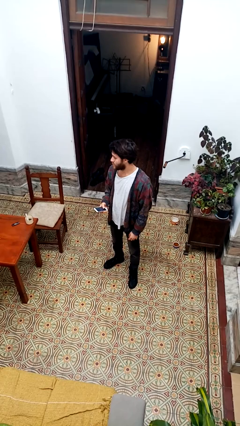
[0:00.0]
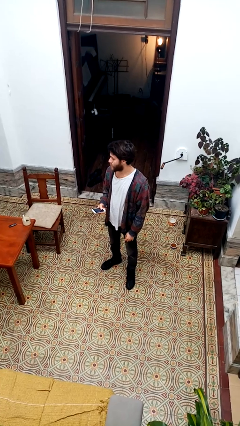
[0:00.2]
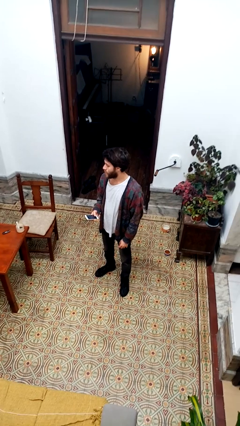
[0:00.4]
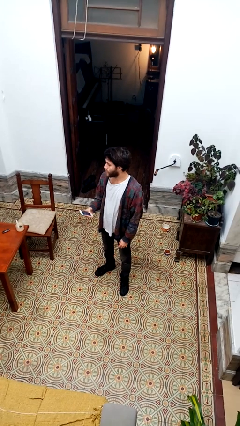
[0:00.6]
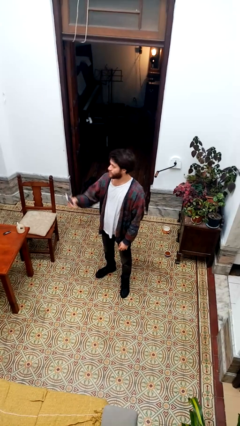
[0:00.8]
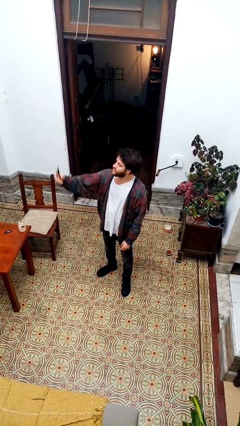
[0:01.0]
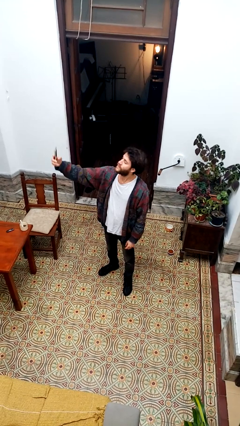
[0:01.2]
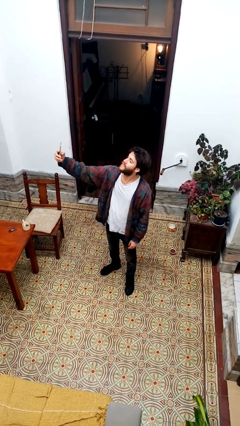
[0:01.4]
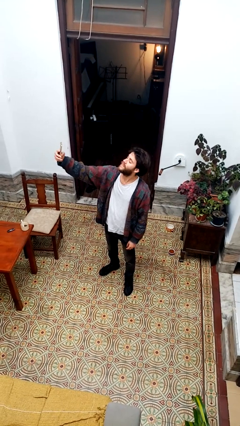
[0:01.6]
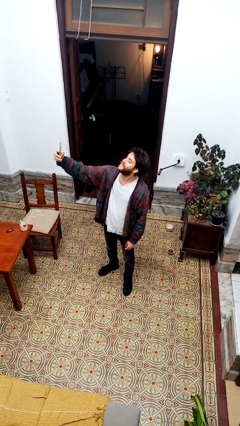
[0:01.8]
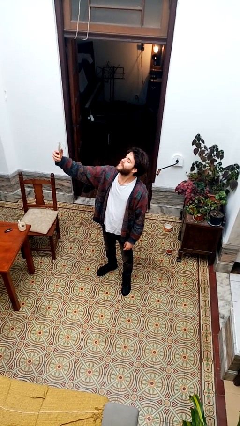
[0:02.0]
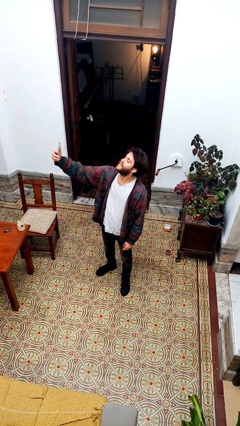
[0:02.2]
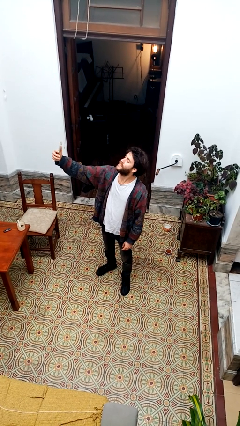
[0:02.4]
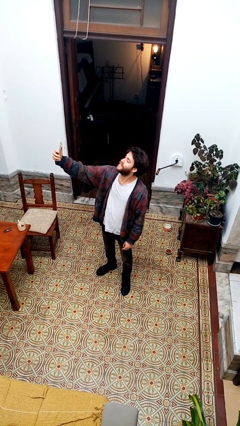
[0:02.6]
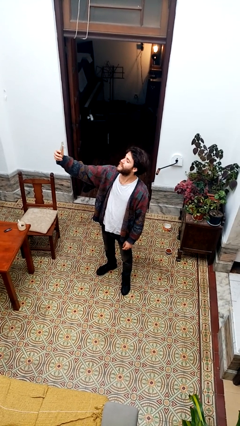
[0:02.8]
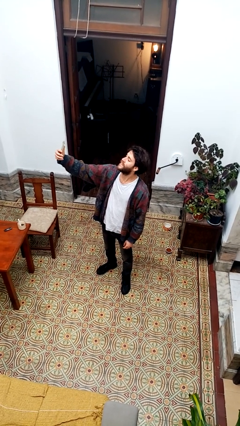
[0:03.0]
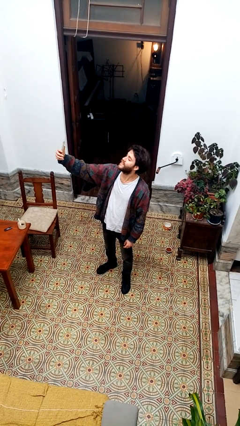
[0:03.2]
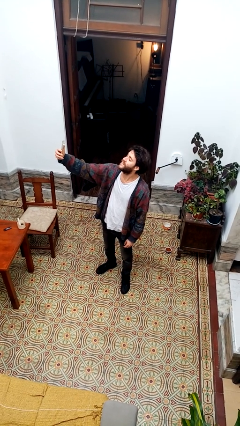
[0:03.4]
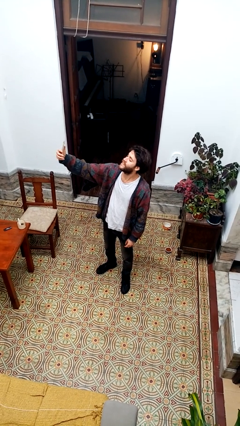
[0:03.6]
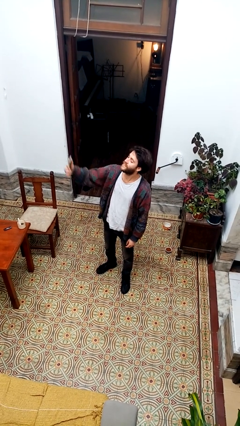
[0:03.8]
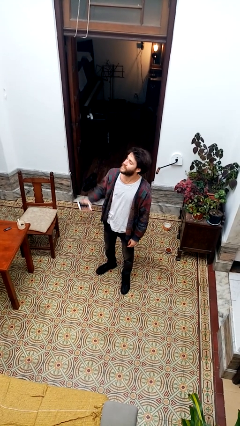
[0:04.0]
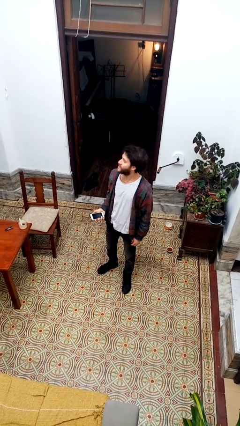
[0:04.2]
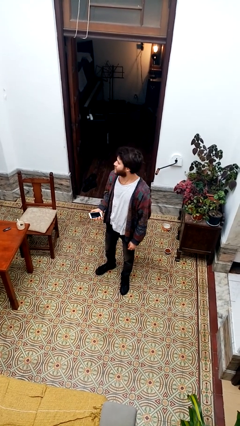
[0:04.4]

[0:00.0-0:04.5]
person takes selfie

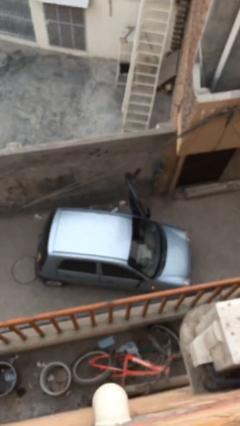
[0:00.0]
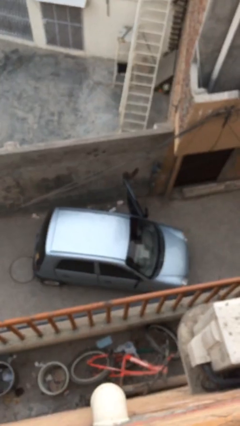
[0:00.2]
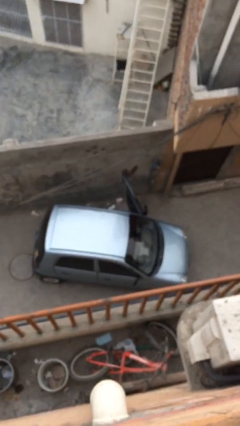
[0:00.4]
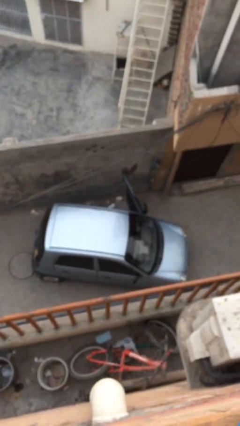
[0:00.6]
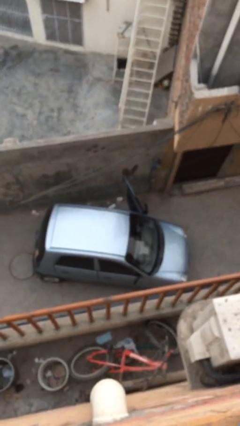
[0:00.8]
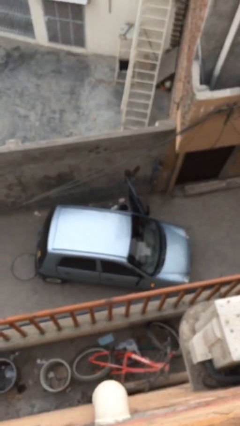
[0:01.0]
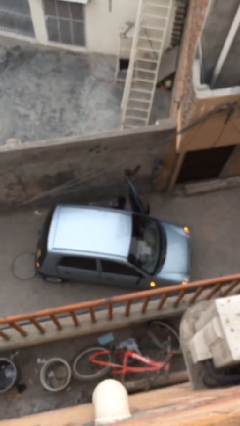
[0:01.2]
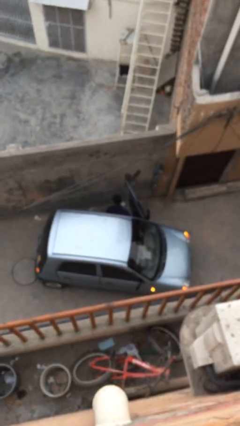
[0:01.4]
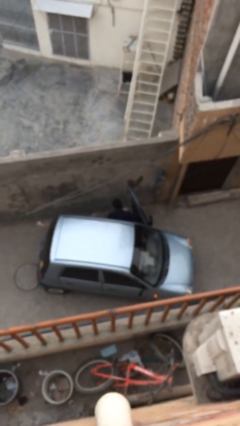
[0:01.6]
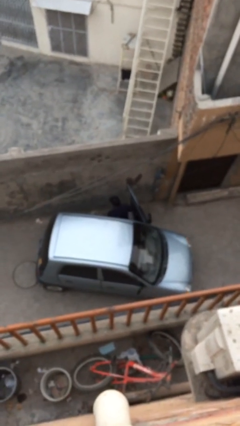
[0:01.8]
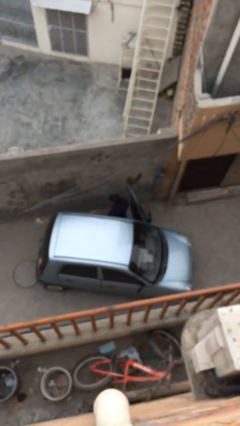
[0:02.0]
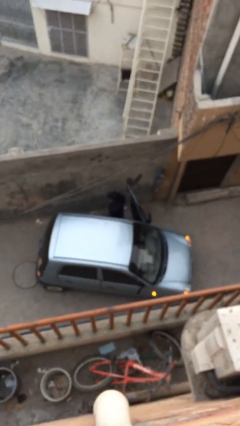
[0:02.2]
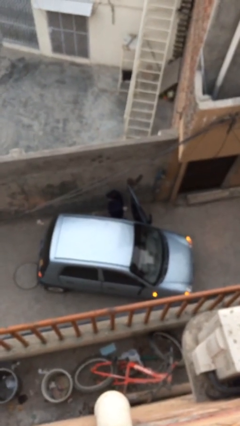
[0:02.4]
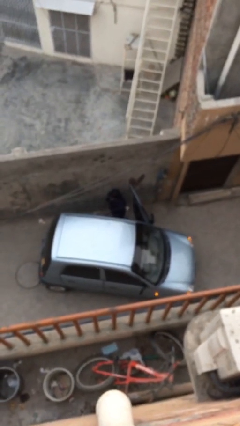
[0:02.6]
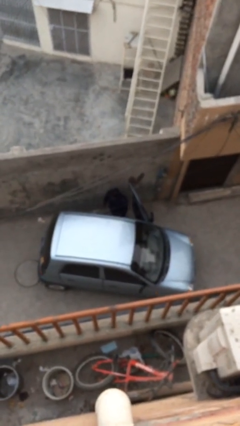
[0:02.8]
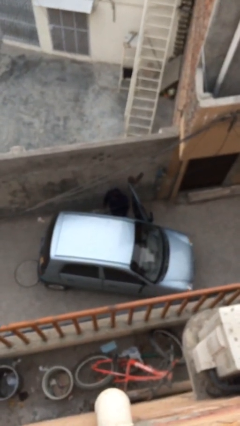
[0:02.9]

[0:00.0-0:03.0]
person exits car

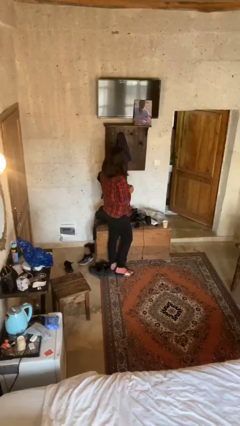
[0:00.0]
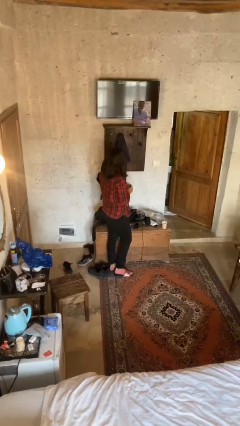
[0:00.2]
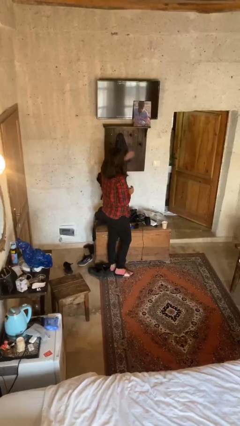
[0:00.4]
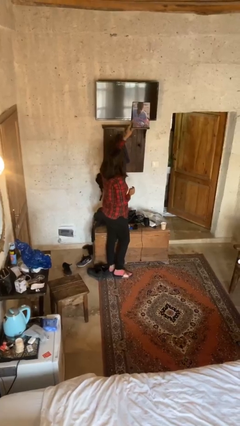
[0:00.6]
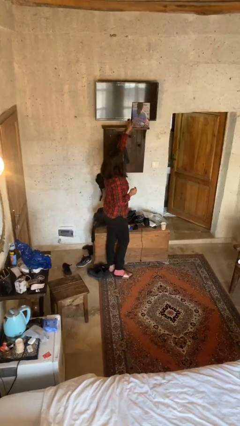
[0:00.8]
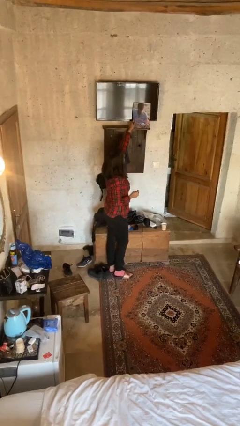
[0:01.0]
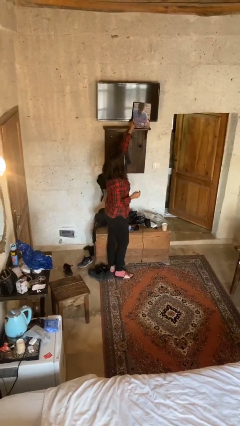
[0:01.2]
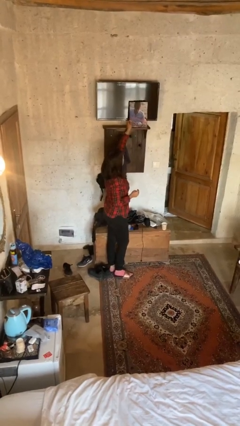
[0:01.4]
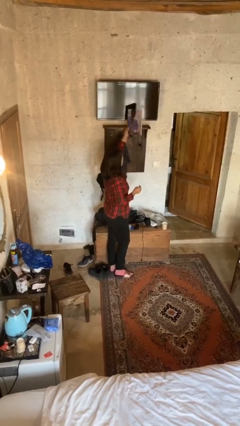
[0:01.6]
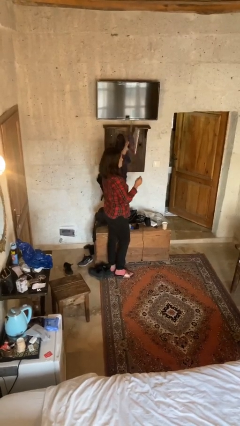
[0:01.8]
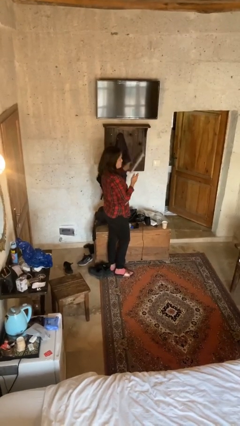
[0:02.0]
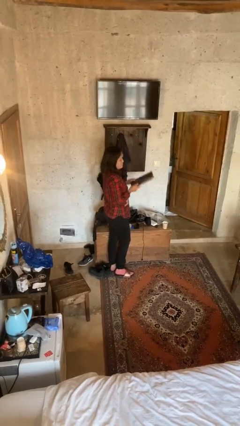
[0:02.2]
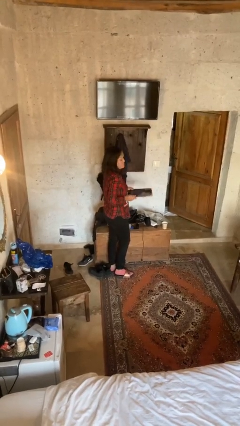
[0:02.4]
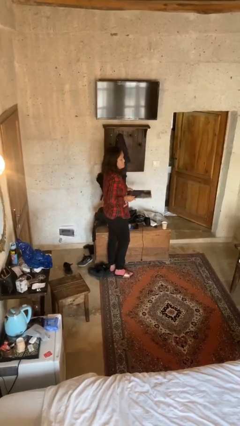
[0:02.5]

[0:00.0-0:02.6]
person picks up object from shelf

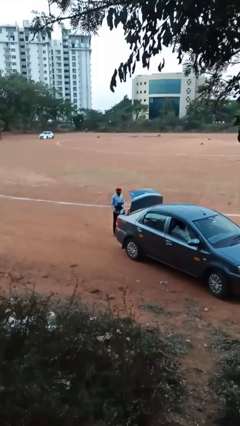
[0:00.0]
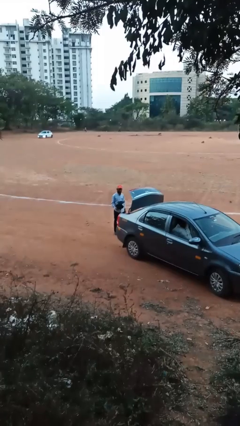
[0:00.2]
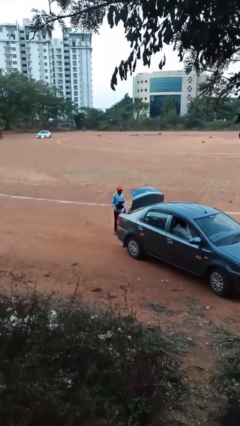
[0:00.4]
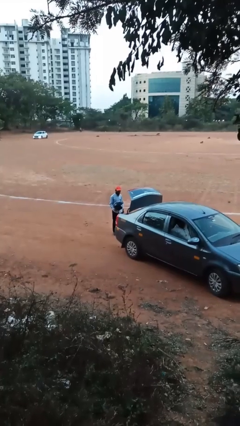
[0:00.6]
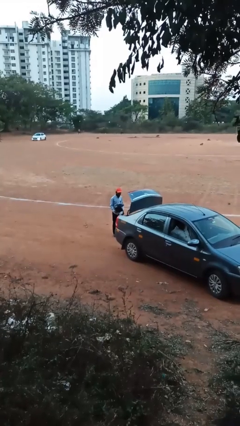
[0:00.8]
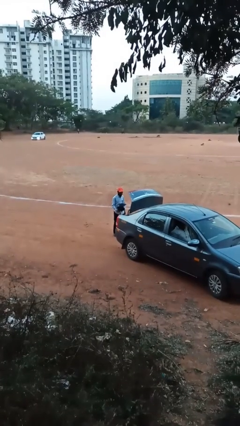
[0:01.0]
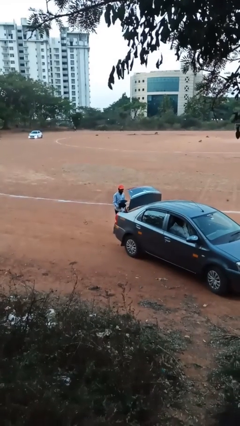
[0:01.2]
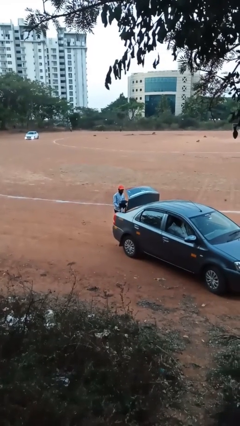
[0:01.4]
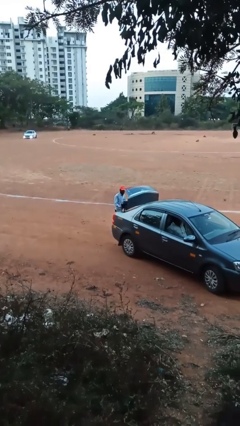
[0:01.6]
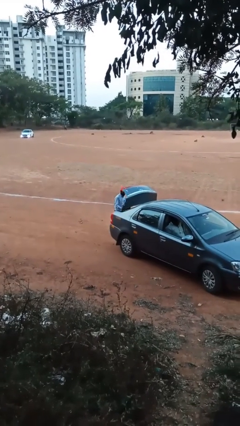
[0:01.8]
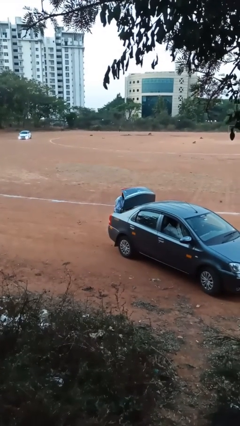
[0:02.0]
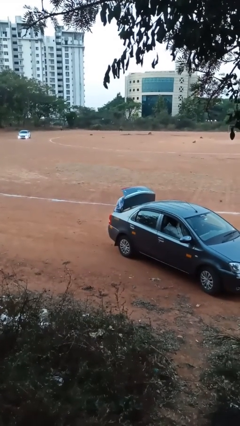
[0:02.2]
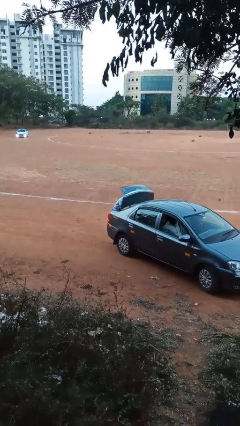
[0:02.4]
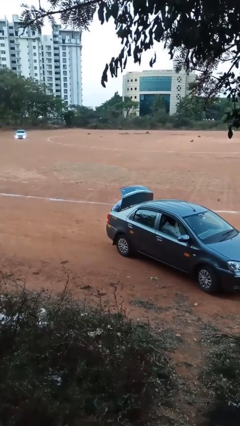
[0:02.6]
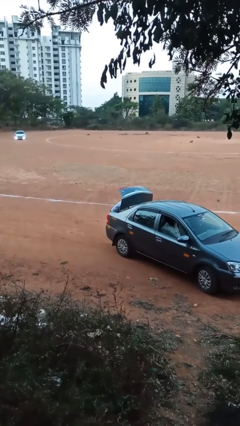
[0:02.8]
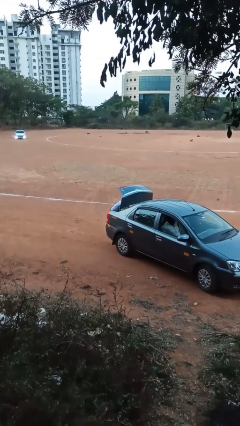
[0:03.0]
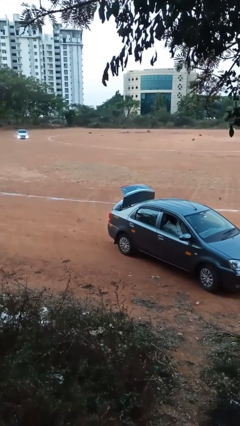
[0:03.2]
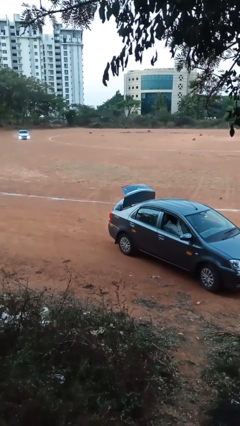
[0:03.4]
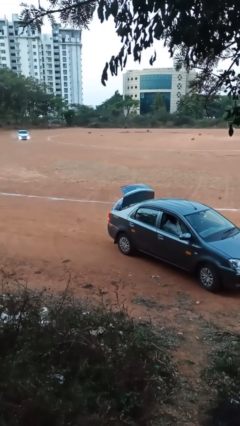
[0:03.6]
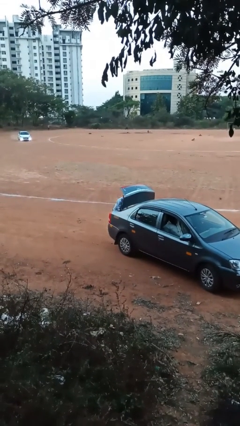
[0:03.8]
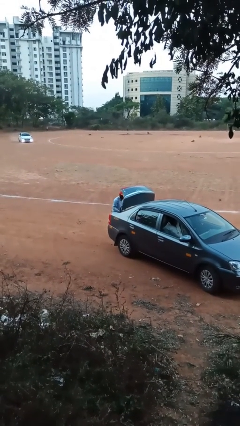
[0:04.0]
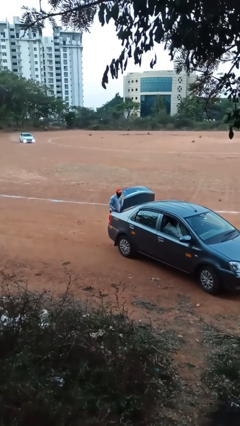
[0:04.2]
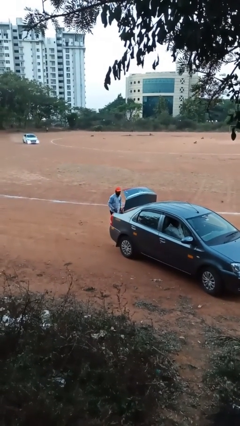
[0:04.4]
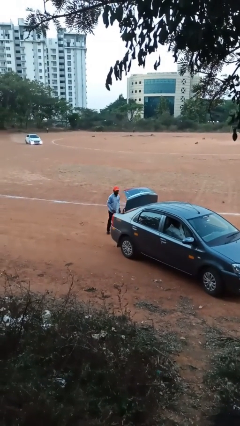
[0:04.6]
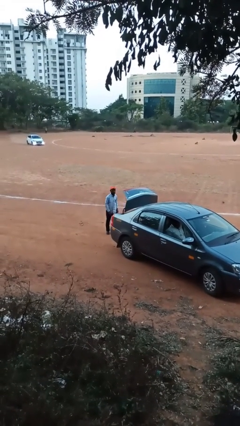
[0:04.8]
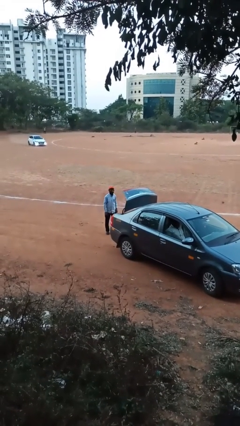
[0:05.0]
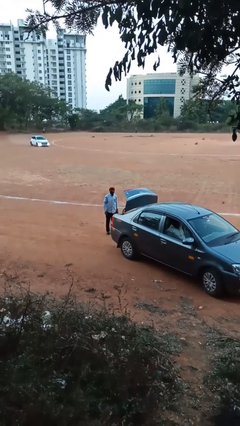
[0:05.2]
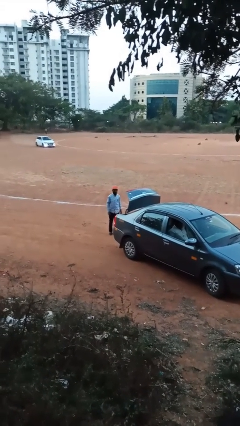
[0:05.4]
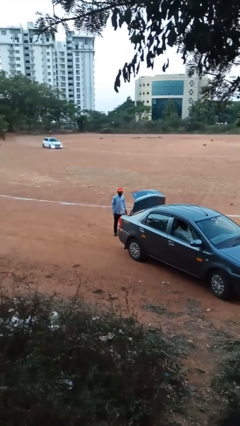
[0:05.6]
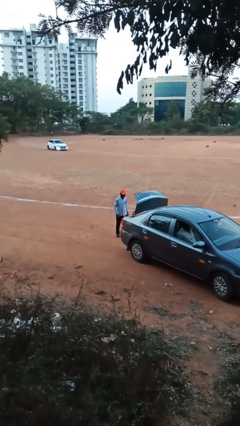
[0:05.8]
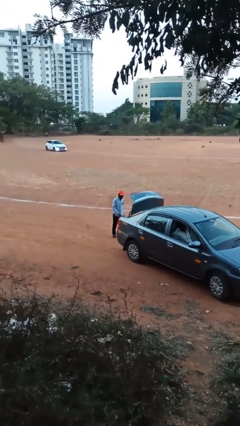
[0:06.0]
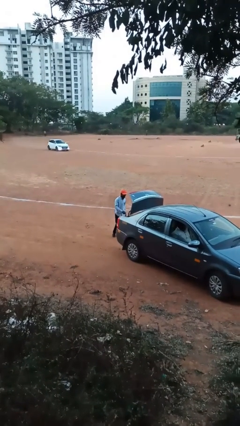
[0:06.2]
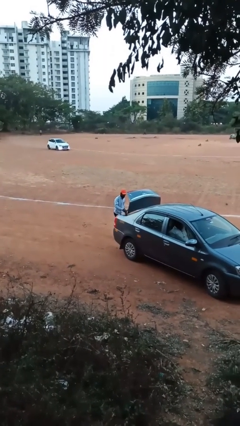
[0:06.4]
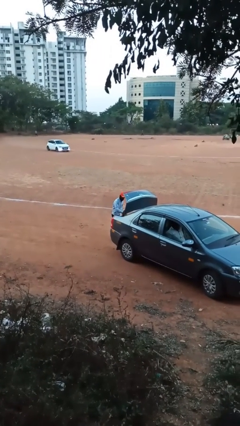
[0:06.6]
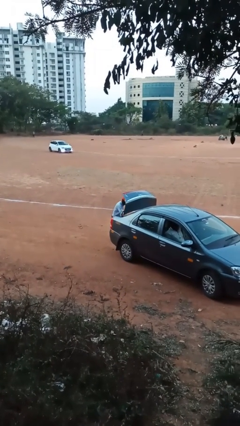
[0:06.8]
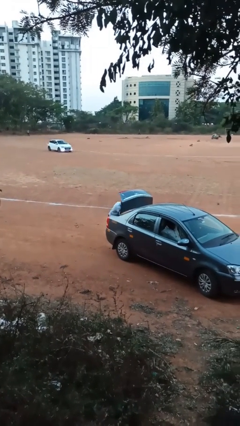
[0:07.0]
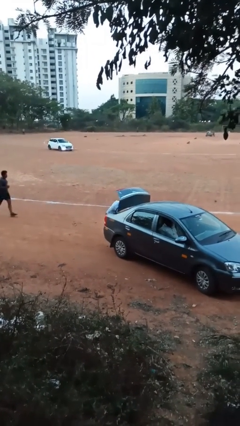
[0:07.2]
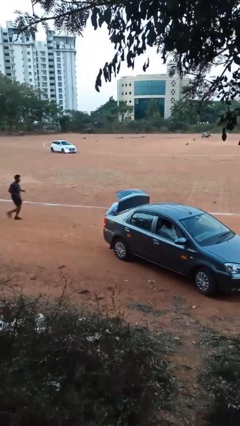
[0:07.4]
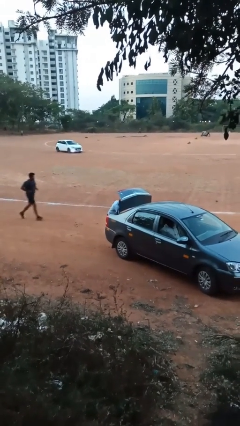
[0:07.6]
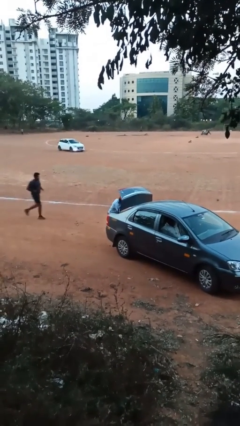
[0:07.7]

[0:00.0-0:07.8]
person loads car
